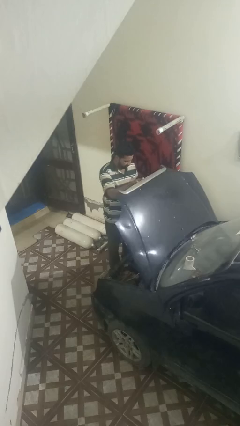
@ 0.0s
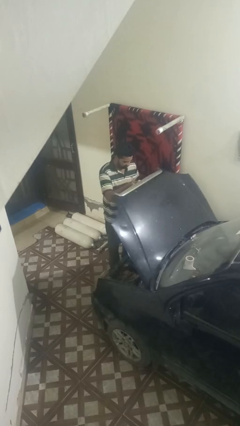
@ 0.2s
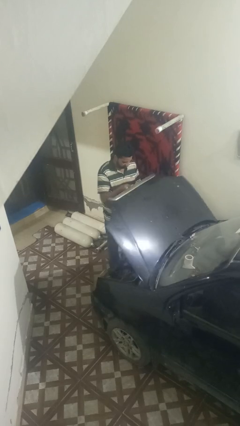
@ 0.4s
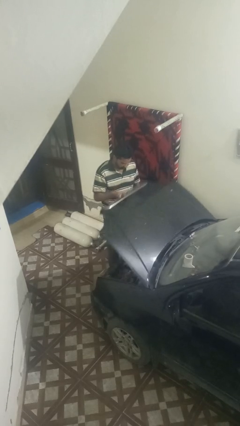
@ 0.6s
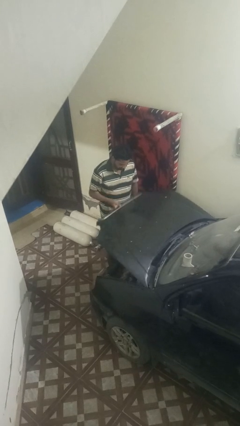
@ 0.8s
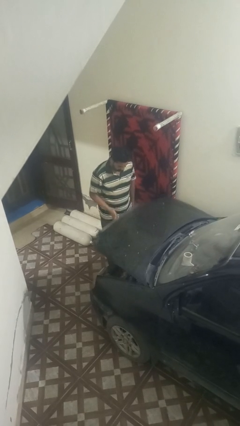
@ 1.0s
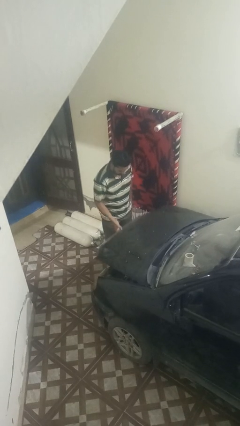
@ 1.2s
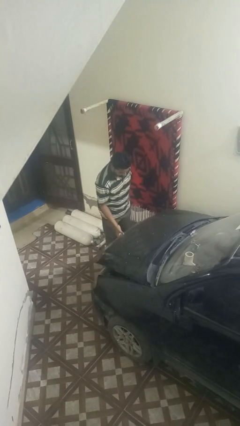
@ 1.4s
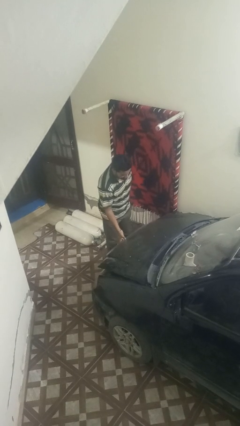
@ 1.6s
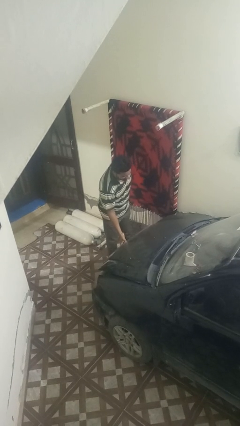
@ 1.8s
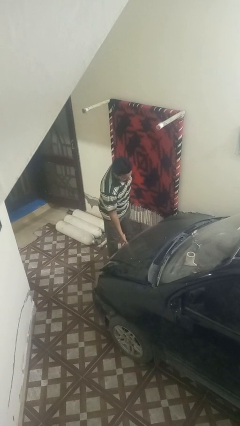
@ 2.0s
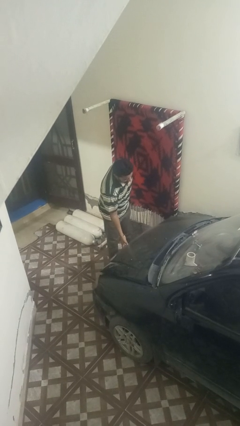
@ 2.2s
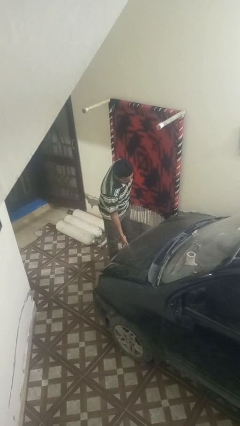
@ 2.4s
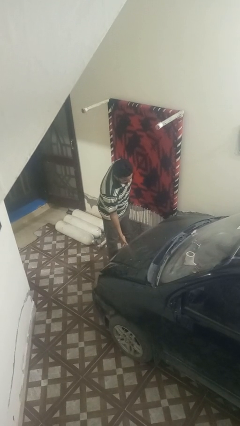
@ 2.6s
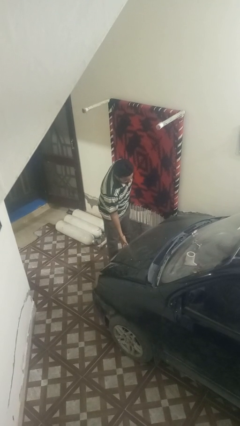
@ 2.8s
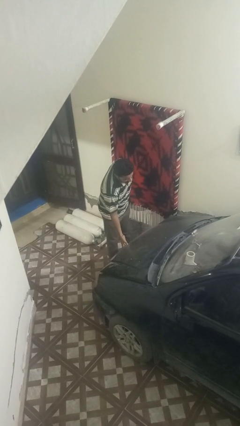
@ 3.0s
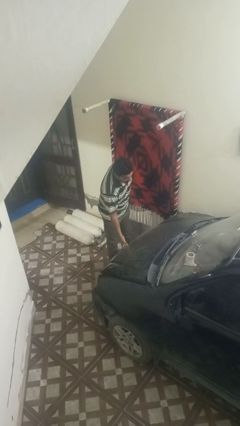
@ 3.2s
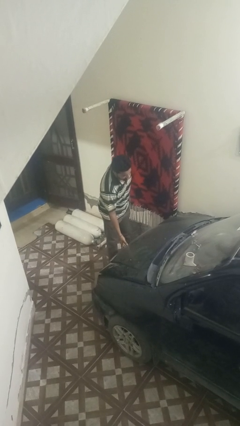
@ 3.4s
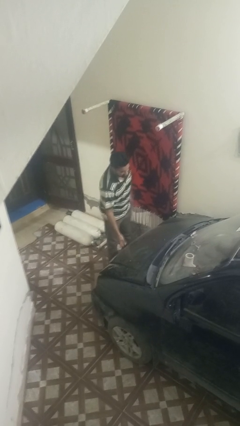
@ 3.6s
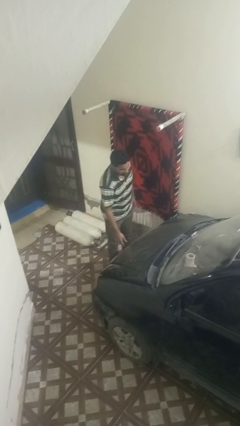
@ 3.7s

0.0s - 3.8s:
person closes car hood

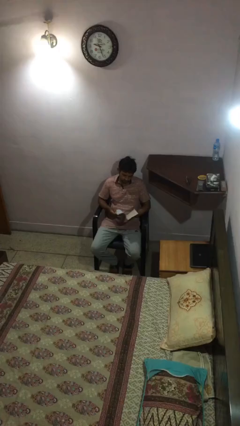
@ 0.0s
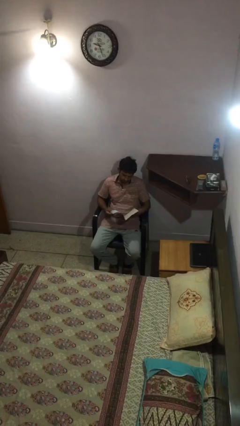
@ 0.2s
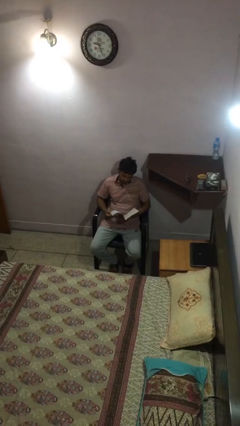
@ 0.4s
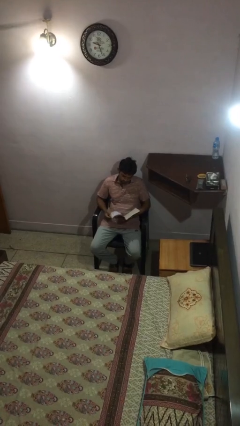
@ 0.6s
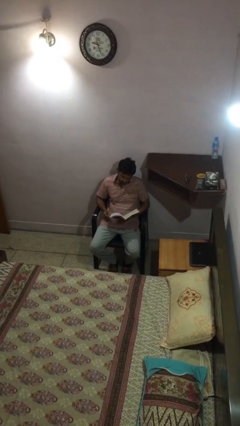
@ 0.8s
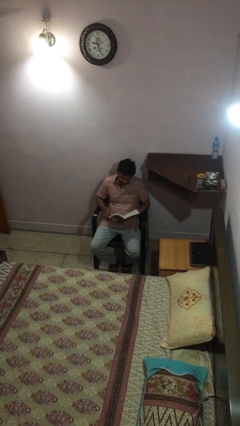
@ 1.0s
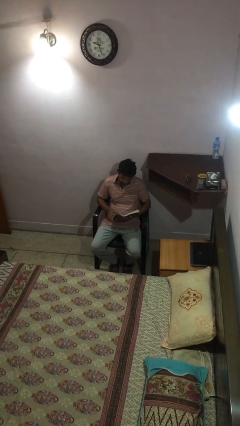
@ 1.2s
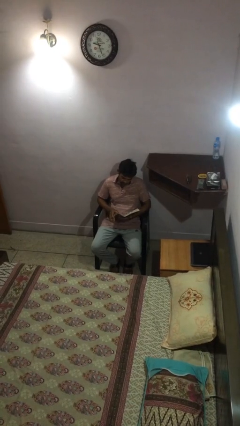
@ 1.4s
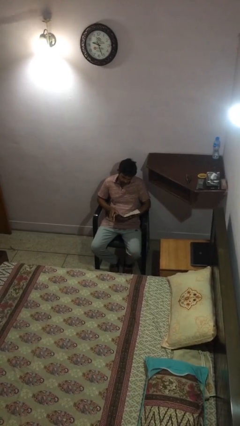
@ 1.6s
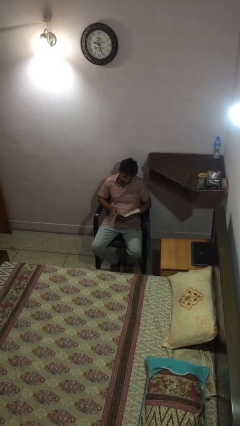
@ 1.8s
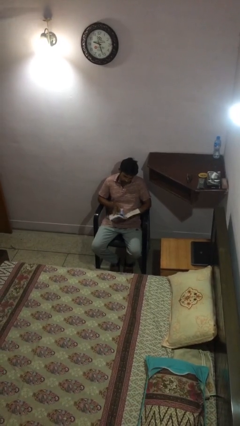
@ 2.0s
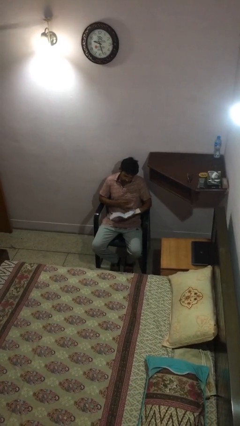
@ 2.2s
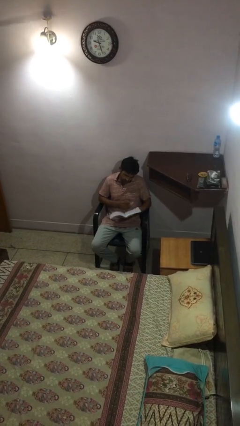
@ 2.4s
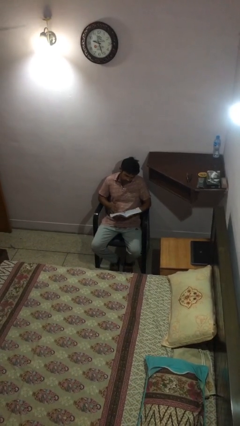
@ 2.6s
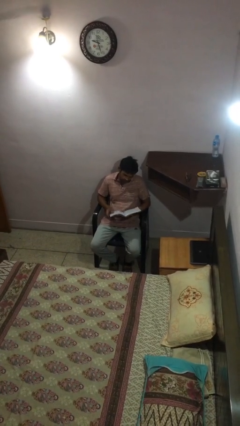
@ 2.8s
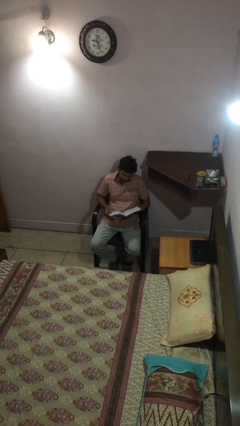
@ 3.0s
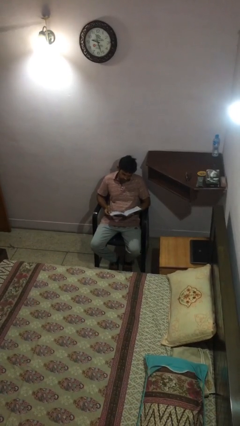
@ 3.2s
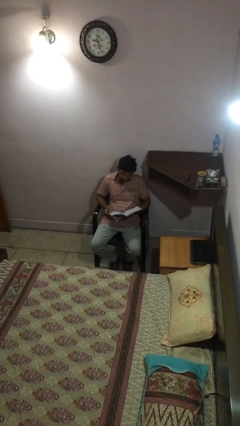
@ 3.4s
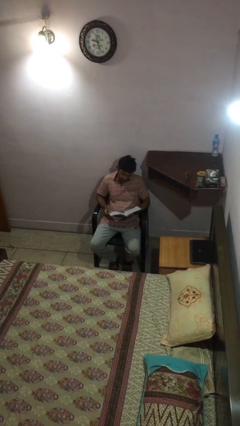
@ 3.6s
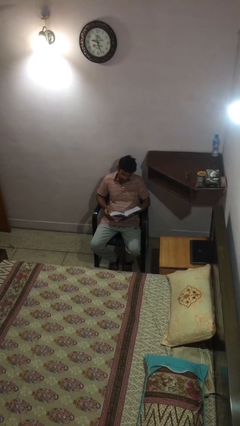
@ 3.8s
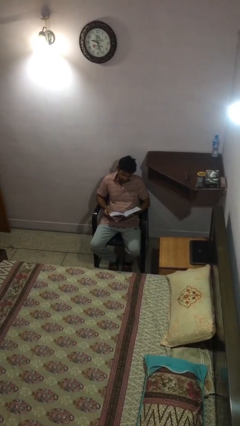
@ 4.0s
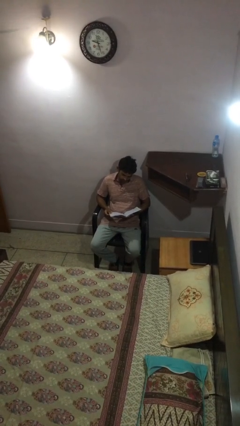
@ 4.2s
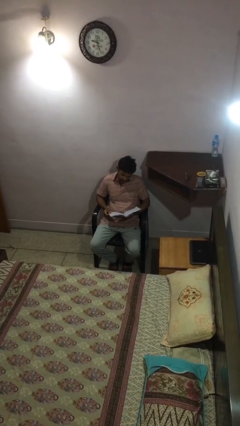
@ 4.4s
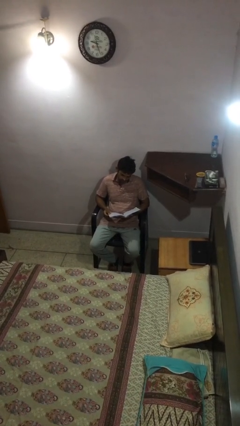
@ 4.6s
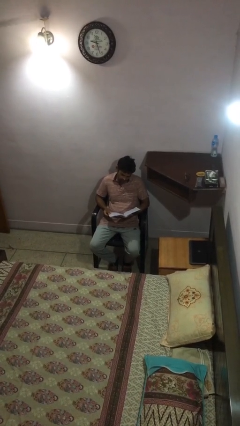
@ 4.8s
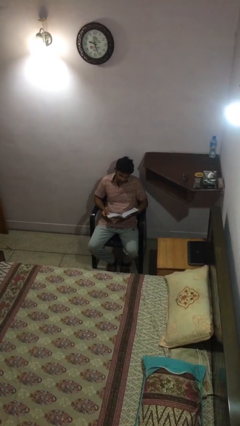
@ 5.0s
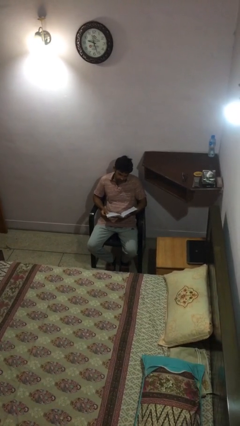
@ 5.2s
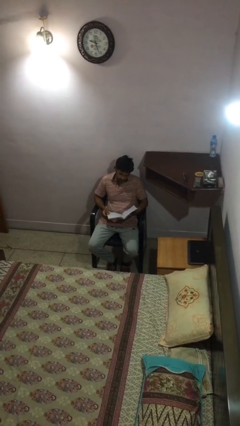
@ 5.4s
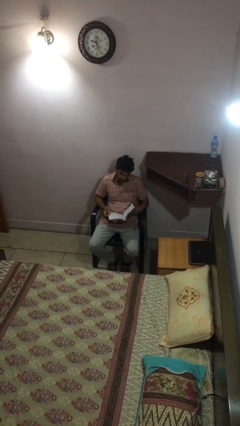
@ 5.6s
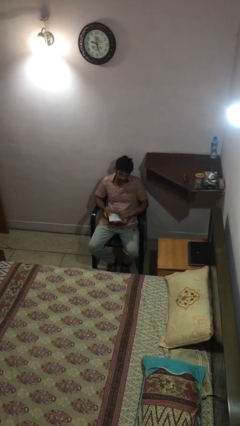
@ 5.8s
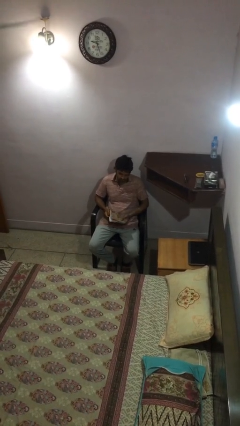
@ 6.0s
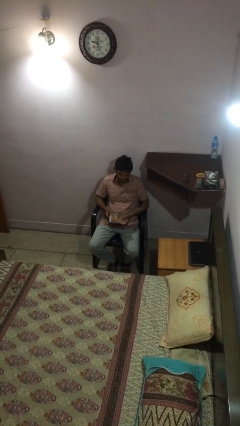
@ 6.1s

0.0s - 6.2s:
person reads document

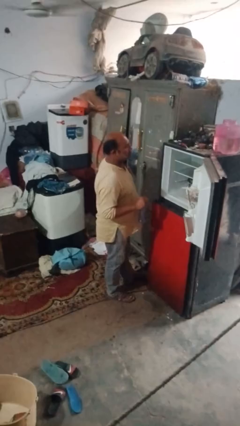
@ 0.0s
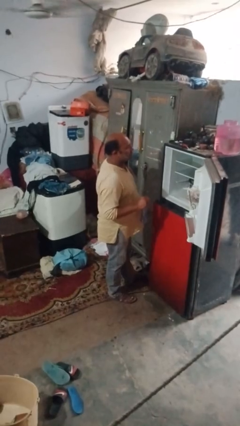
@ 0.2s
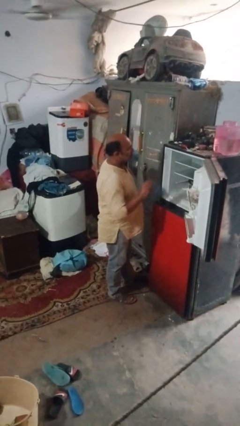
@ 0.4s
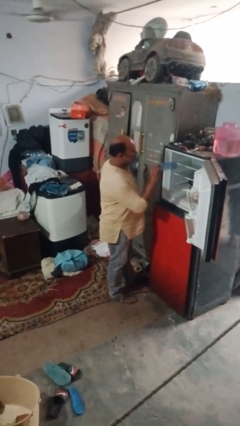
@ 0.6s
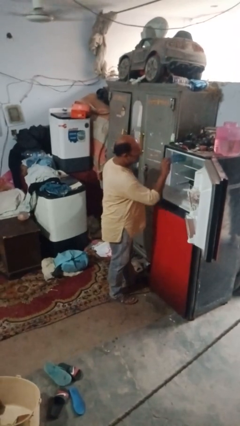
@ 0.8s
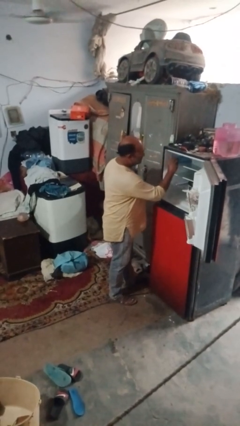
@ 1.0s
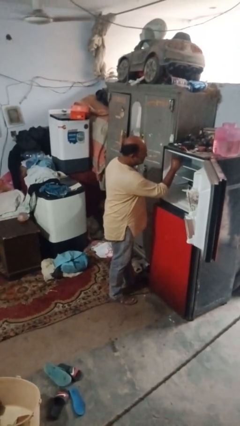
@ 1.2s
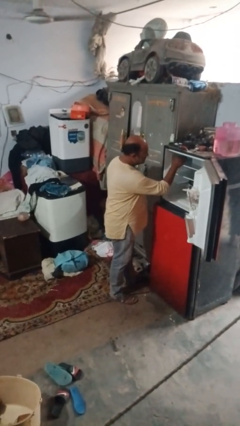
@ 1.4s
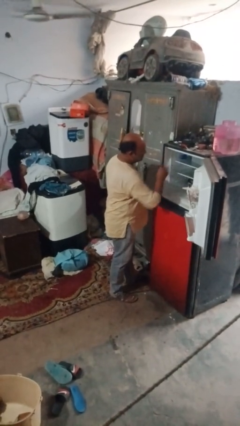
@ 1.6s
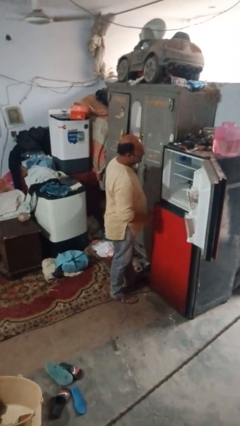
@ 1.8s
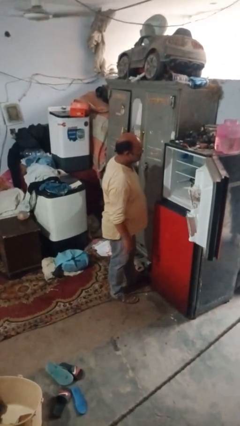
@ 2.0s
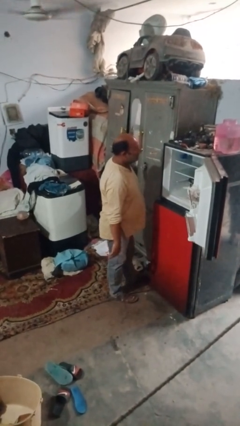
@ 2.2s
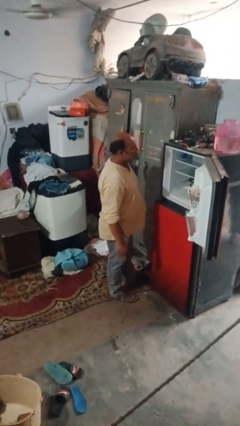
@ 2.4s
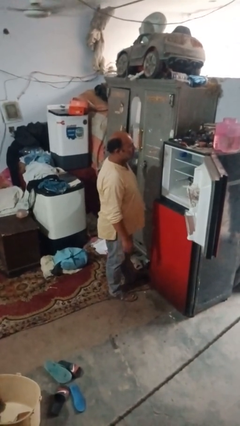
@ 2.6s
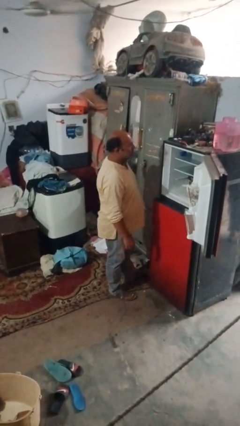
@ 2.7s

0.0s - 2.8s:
person puts object into refrigerator

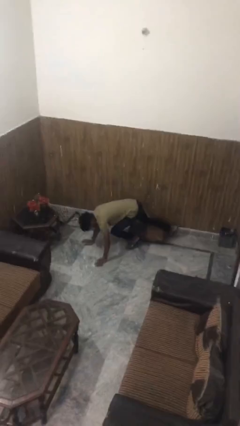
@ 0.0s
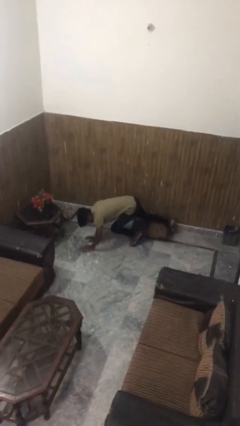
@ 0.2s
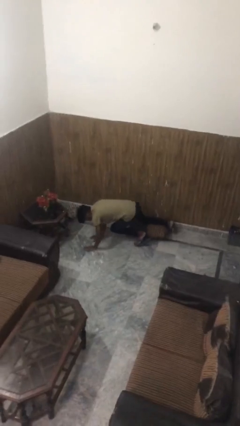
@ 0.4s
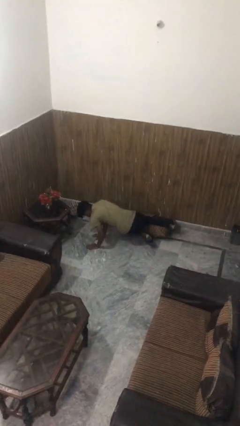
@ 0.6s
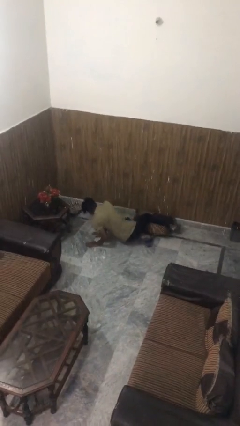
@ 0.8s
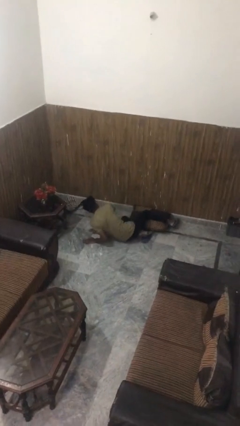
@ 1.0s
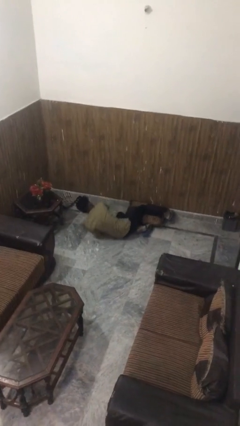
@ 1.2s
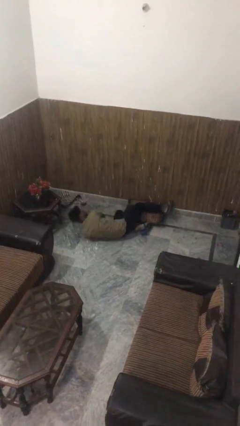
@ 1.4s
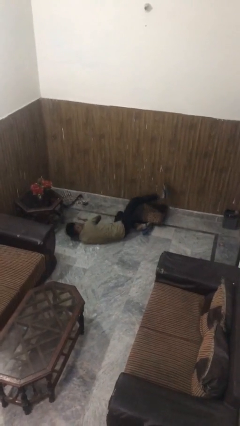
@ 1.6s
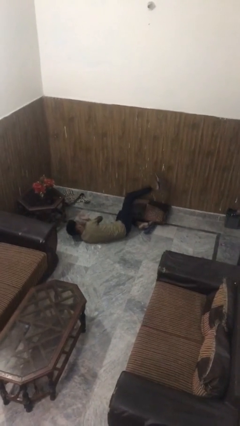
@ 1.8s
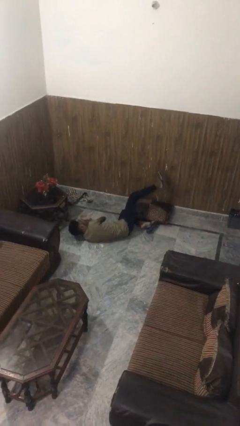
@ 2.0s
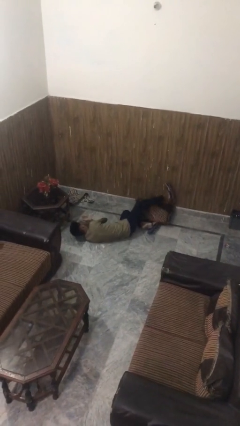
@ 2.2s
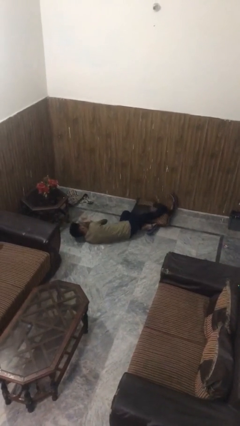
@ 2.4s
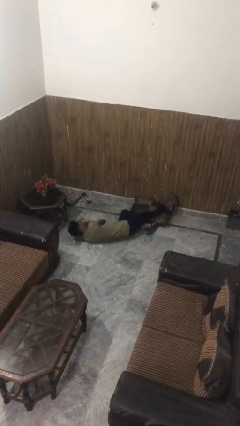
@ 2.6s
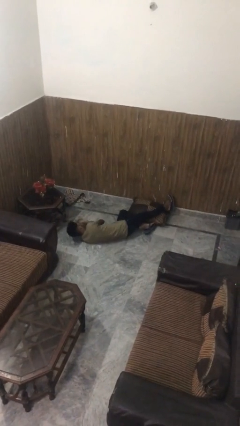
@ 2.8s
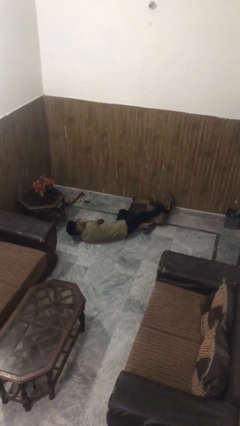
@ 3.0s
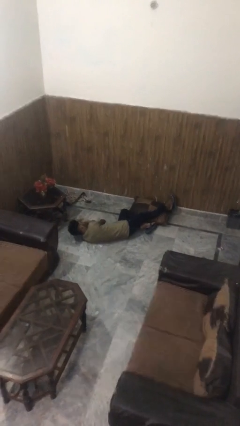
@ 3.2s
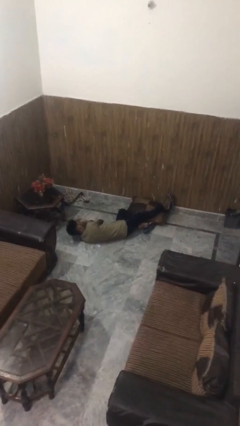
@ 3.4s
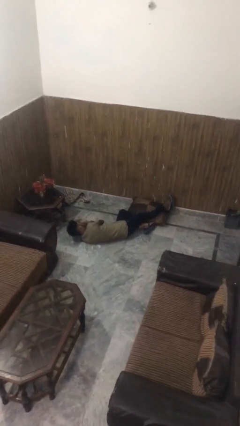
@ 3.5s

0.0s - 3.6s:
person lies down on floor

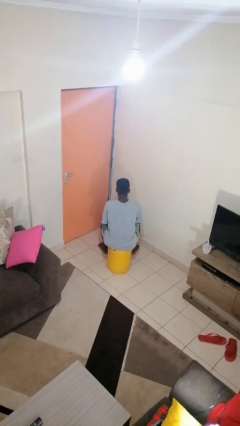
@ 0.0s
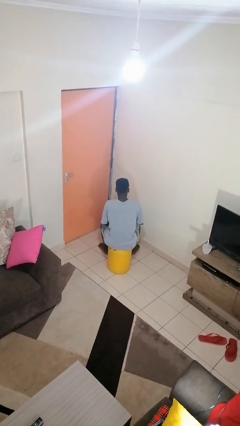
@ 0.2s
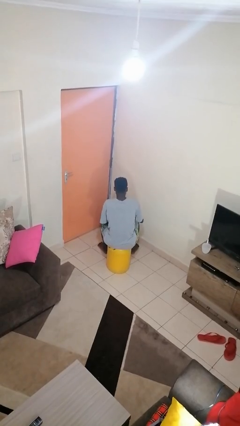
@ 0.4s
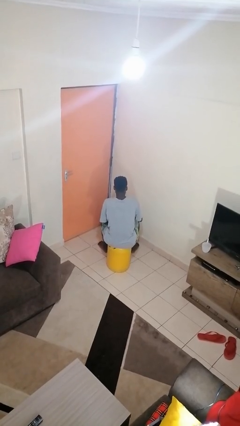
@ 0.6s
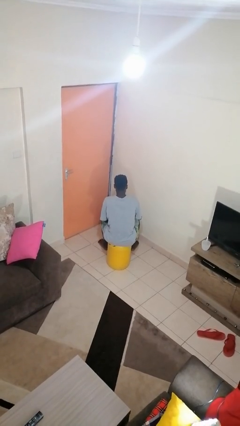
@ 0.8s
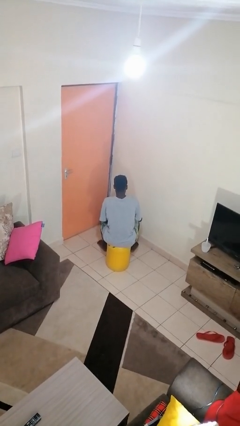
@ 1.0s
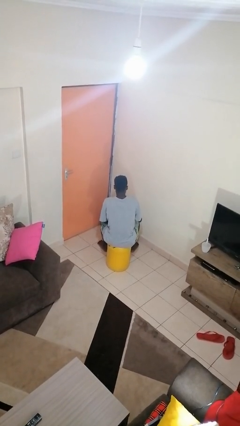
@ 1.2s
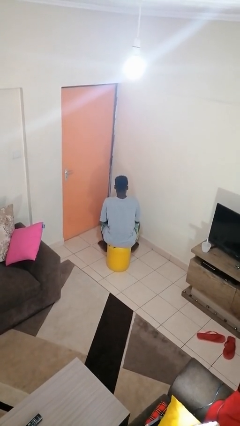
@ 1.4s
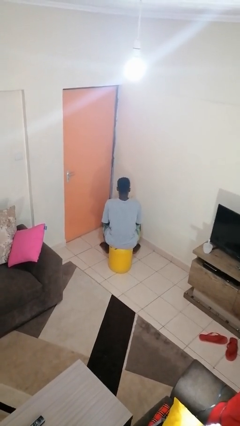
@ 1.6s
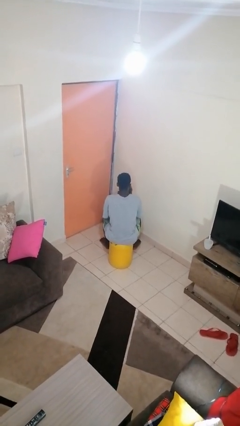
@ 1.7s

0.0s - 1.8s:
person stirs mug
